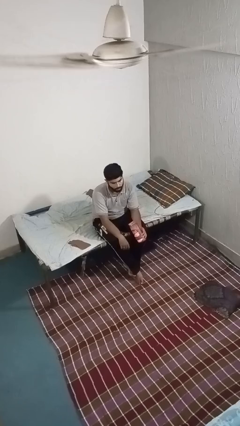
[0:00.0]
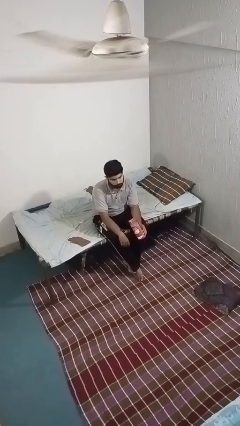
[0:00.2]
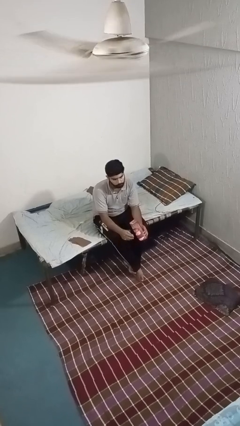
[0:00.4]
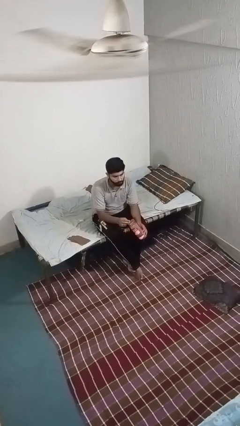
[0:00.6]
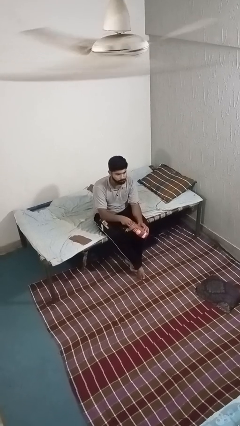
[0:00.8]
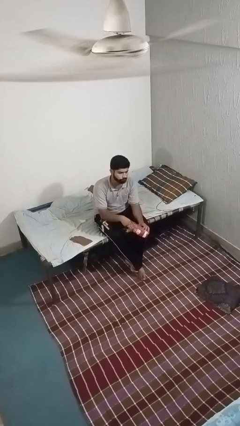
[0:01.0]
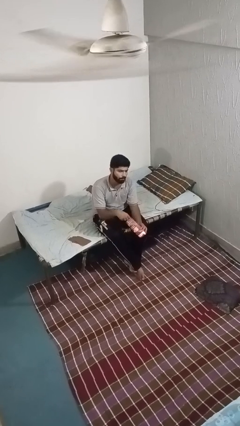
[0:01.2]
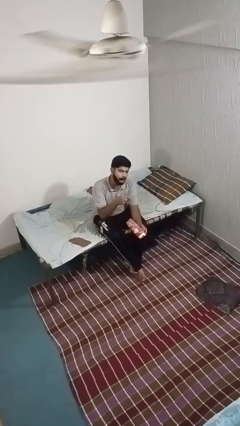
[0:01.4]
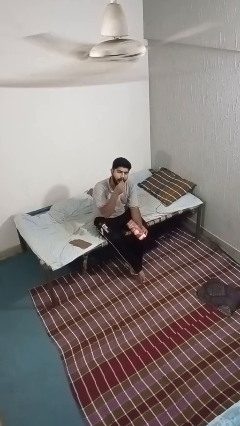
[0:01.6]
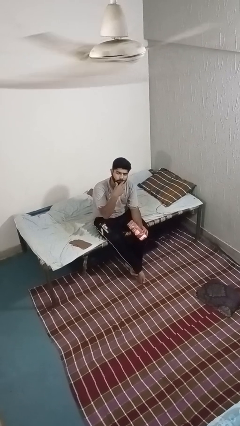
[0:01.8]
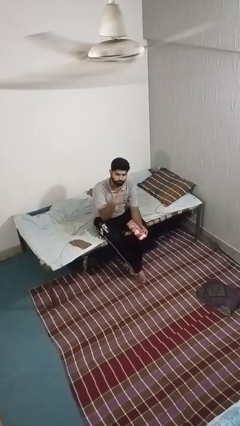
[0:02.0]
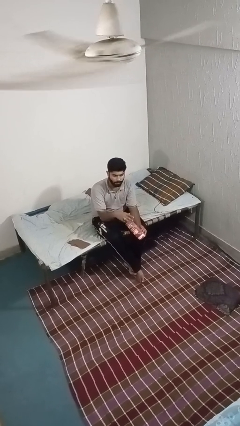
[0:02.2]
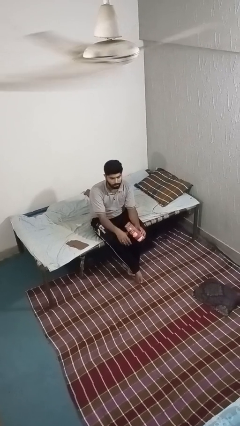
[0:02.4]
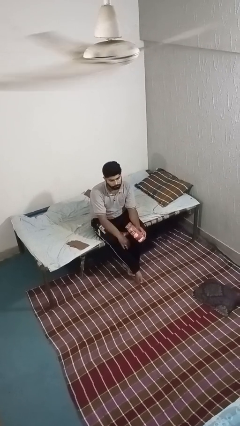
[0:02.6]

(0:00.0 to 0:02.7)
person eats snack from bag

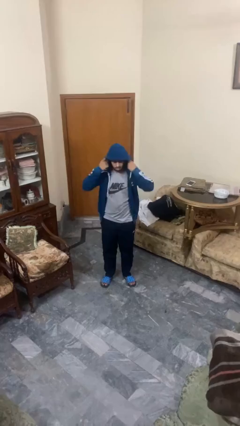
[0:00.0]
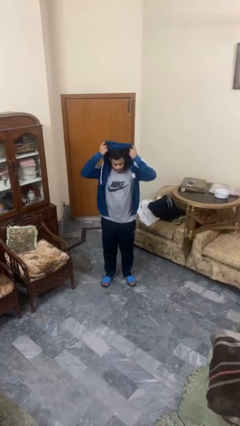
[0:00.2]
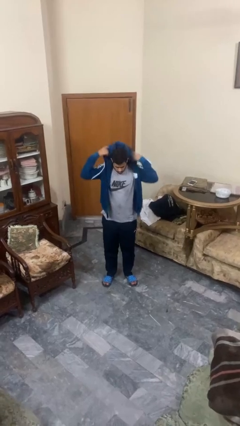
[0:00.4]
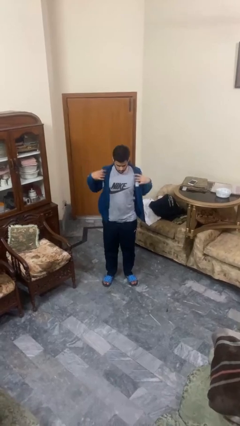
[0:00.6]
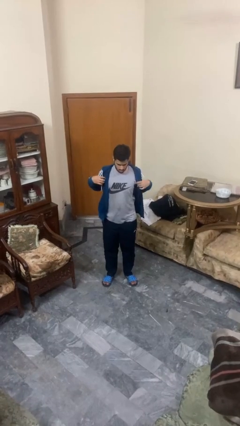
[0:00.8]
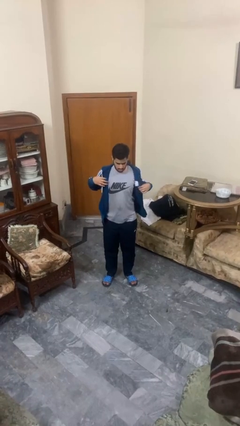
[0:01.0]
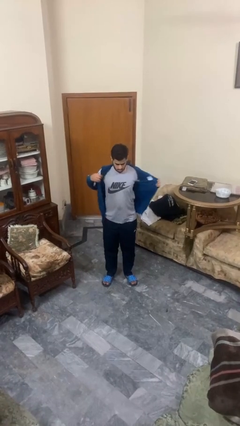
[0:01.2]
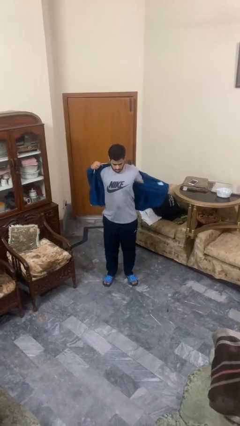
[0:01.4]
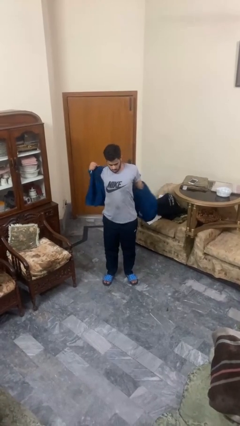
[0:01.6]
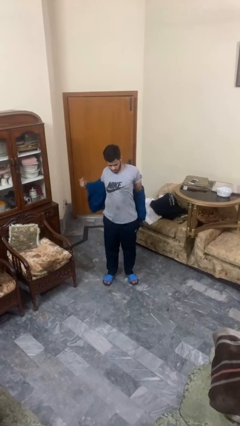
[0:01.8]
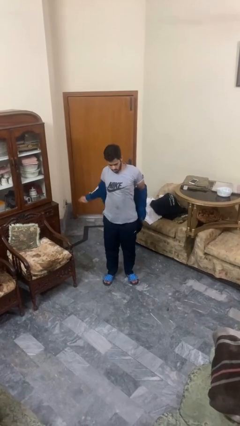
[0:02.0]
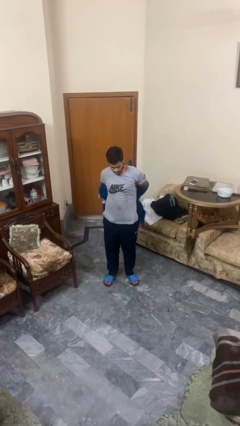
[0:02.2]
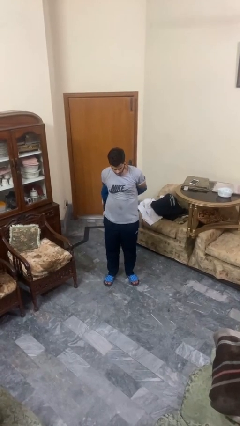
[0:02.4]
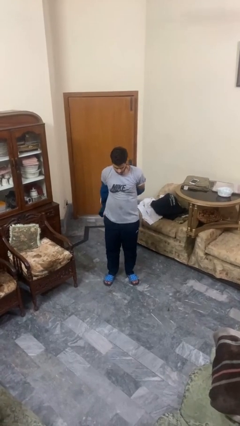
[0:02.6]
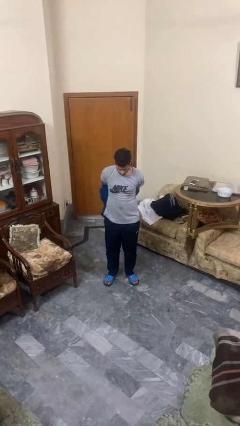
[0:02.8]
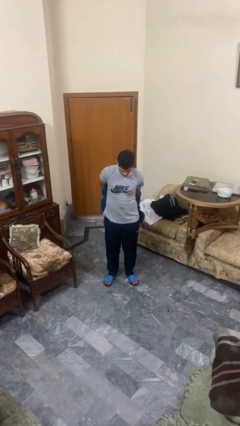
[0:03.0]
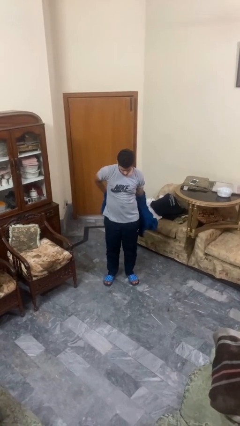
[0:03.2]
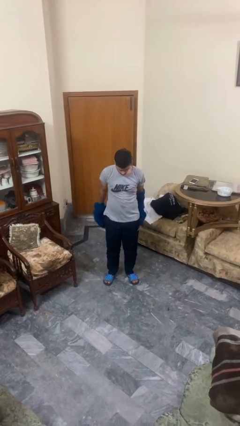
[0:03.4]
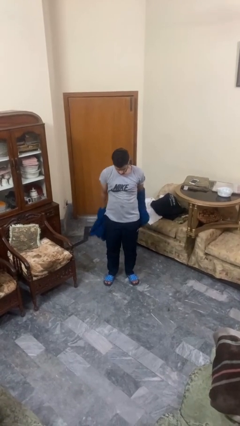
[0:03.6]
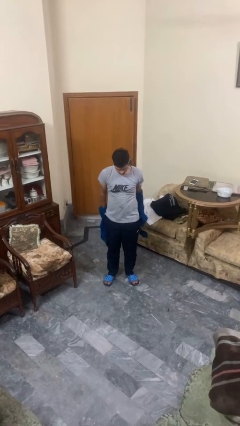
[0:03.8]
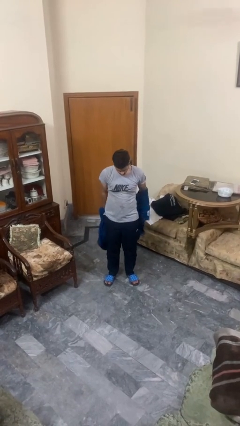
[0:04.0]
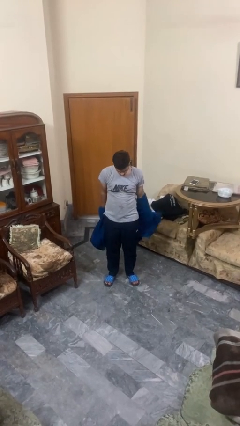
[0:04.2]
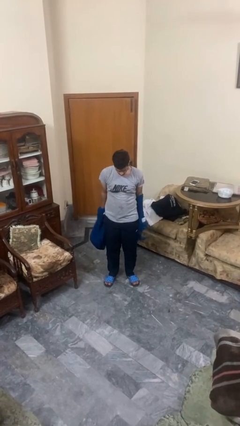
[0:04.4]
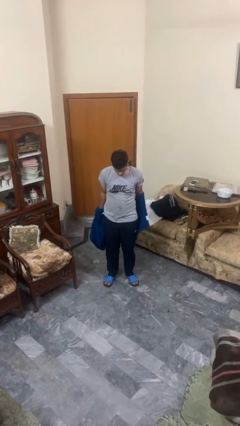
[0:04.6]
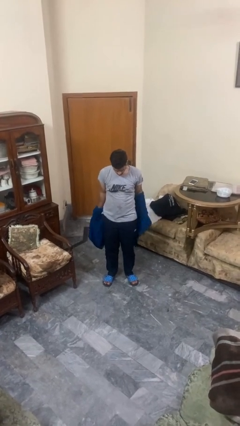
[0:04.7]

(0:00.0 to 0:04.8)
person takes off hoodie

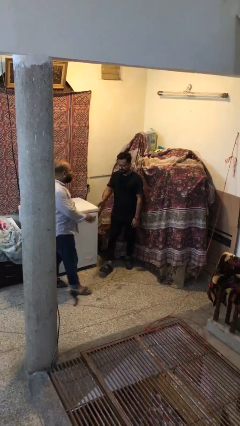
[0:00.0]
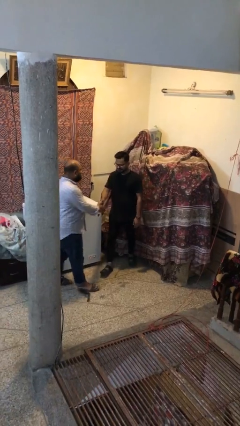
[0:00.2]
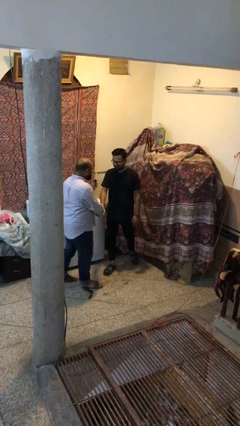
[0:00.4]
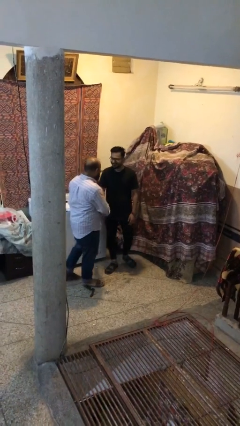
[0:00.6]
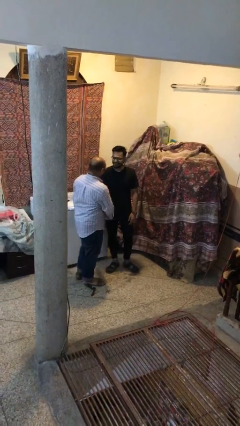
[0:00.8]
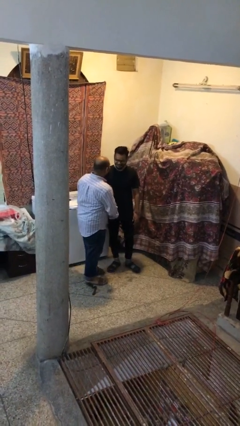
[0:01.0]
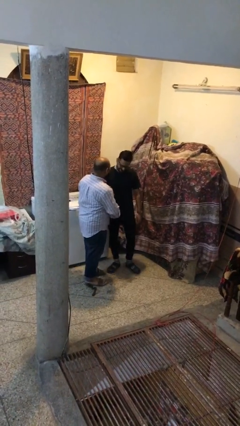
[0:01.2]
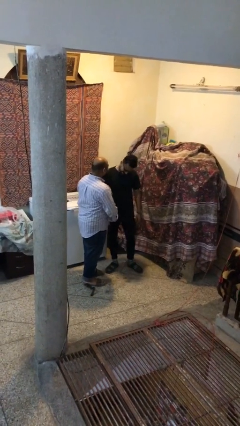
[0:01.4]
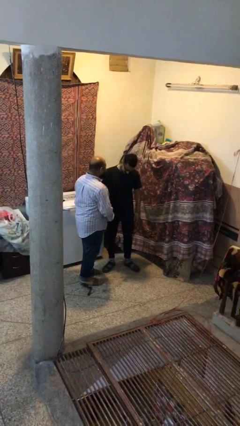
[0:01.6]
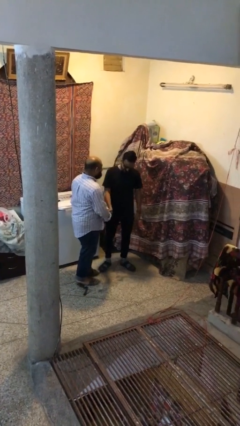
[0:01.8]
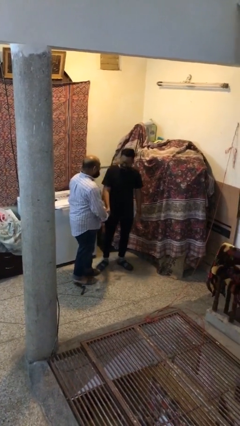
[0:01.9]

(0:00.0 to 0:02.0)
person shakes hand

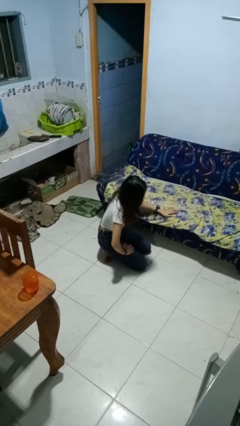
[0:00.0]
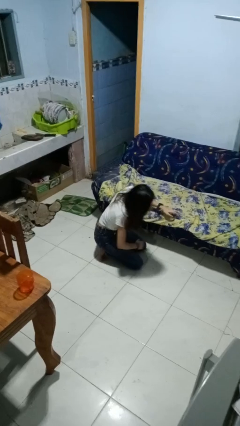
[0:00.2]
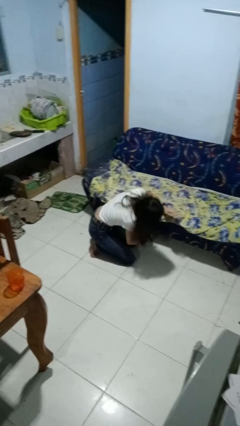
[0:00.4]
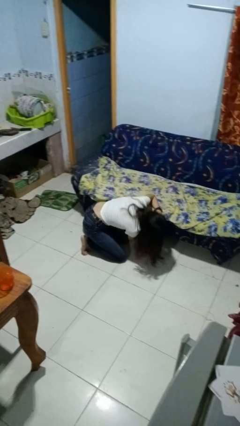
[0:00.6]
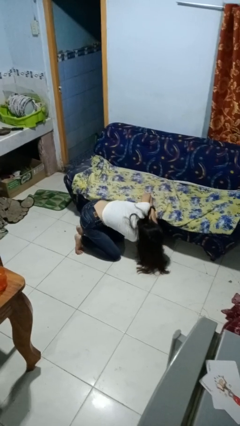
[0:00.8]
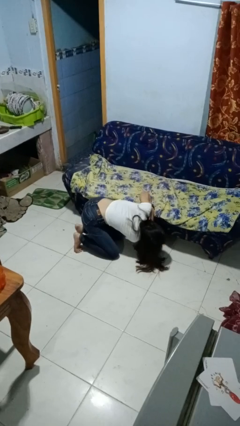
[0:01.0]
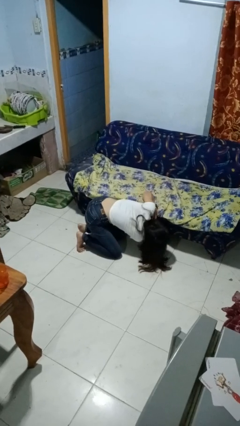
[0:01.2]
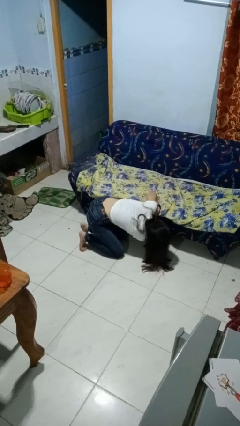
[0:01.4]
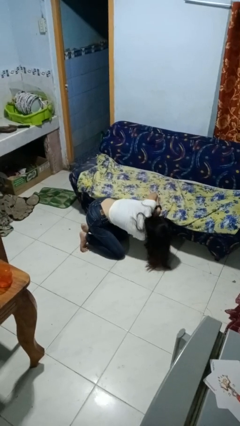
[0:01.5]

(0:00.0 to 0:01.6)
person searches under couch

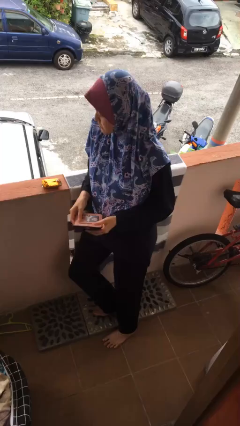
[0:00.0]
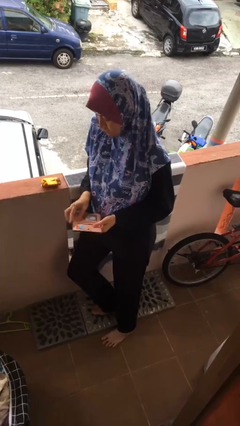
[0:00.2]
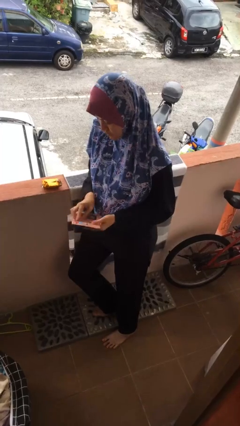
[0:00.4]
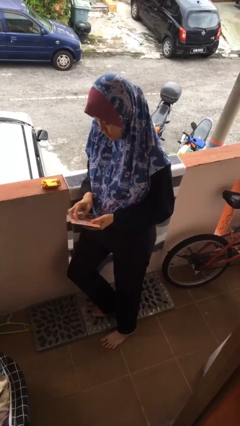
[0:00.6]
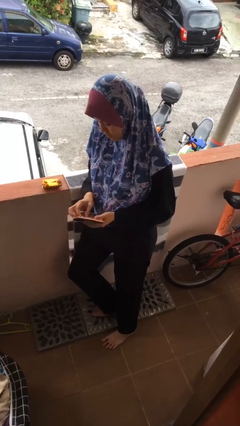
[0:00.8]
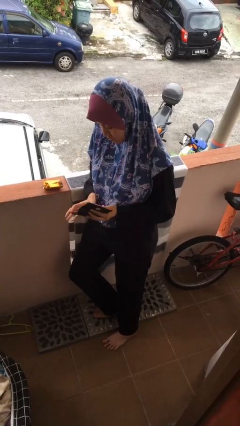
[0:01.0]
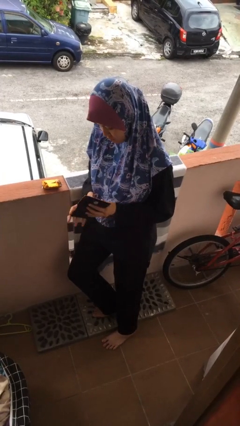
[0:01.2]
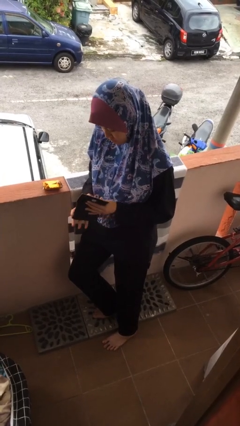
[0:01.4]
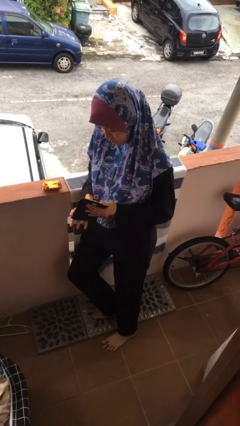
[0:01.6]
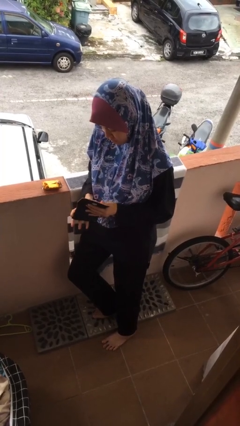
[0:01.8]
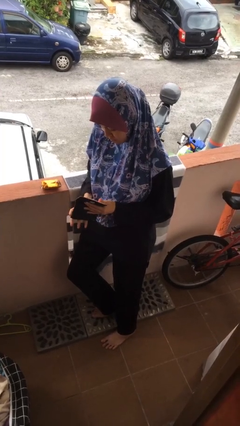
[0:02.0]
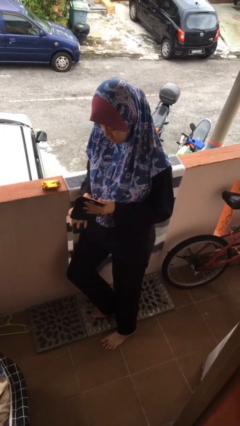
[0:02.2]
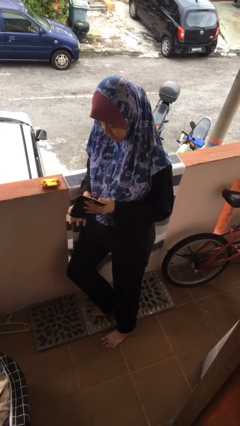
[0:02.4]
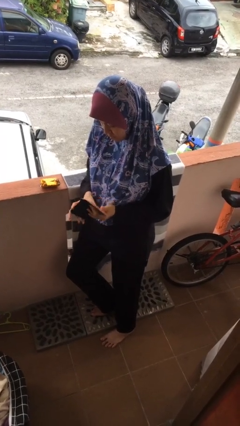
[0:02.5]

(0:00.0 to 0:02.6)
person searches in purse

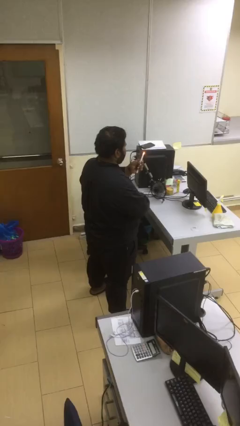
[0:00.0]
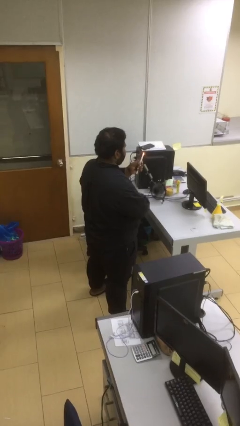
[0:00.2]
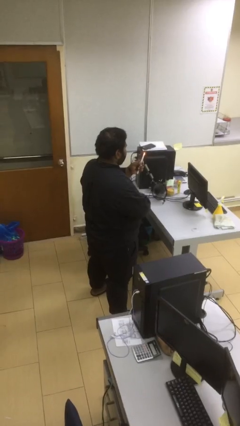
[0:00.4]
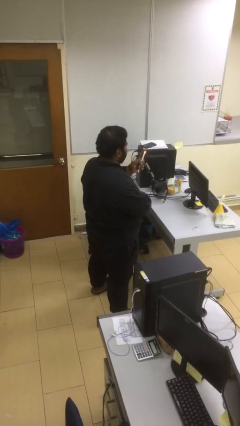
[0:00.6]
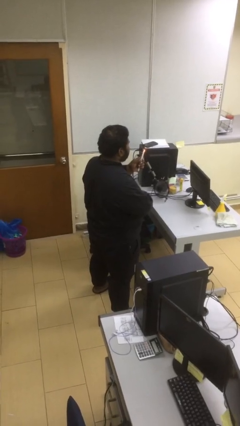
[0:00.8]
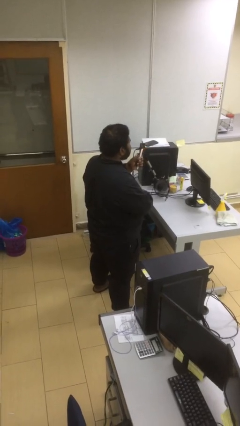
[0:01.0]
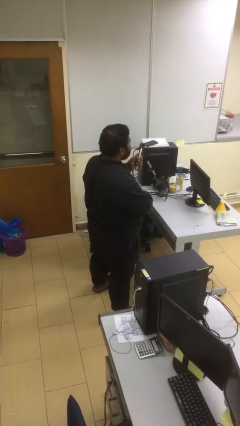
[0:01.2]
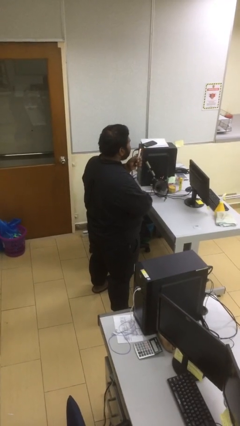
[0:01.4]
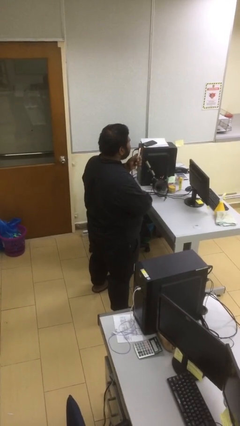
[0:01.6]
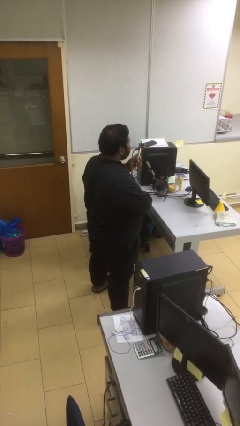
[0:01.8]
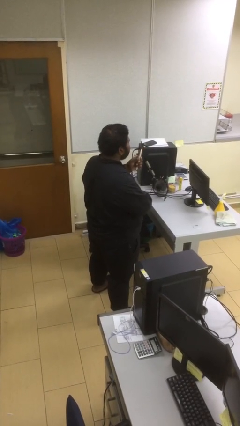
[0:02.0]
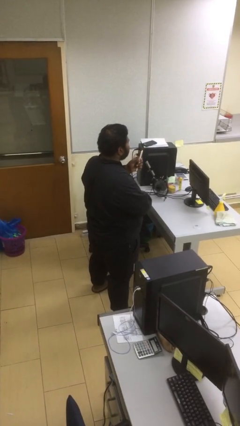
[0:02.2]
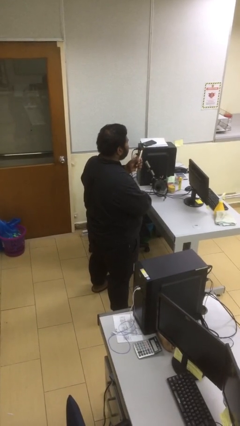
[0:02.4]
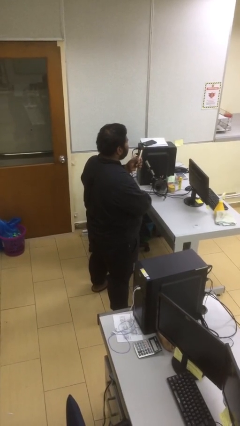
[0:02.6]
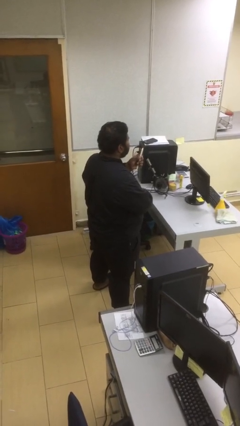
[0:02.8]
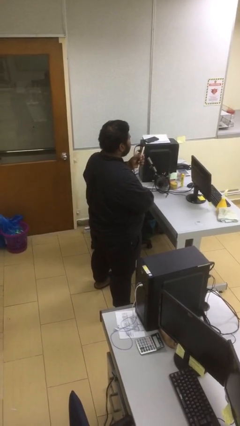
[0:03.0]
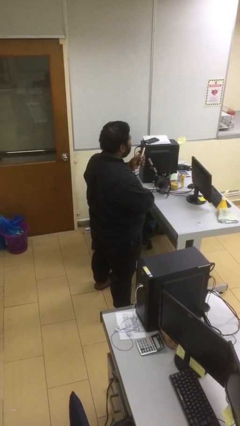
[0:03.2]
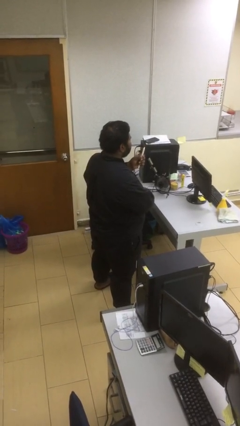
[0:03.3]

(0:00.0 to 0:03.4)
person extinguishes candle

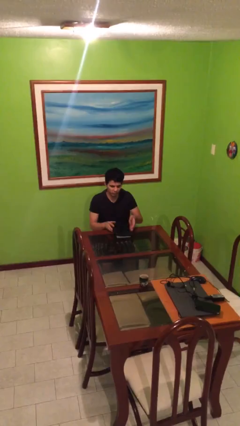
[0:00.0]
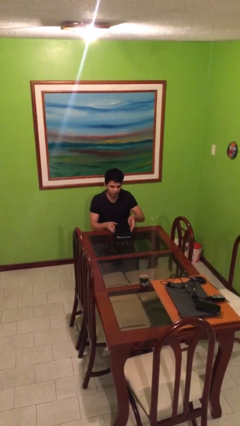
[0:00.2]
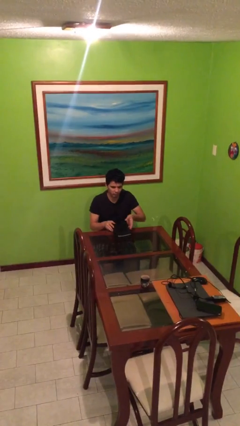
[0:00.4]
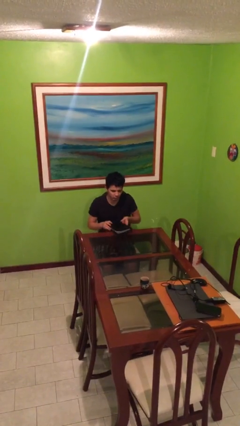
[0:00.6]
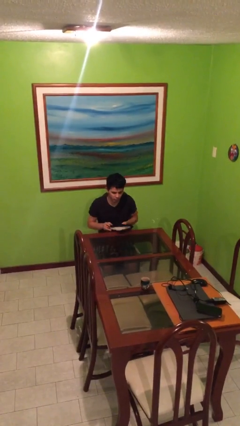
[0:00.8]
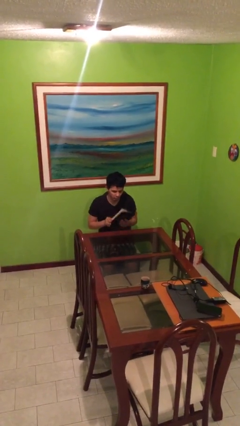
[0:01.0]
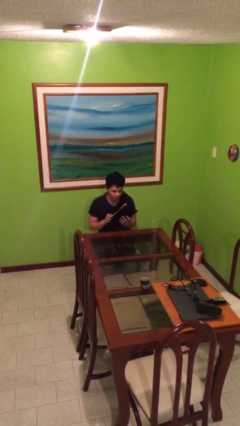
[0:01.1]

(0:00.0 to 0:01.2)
person picks up object from table
